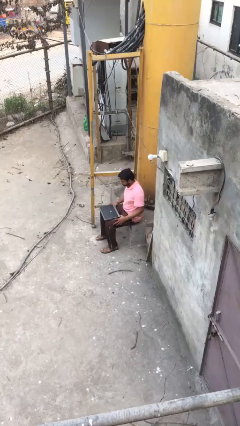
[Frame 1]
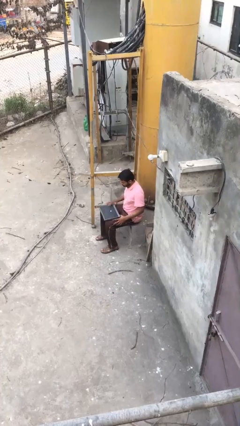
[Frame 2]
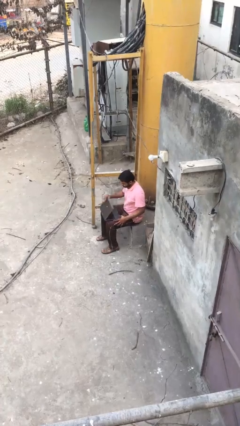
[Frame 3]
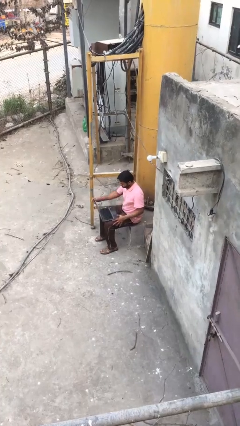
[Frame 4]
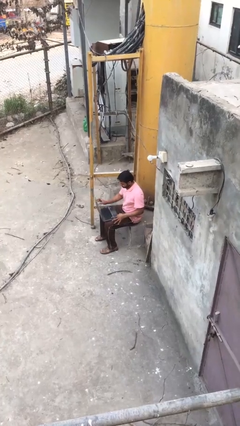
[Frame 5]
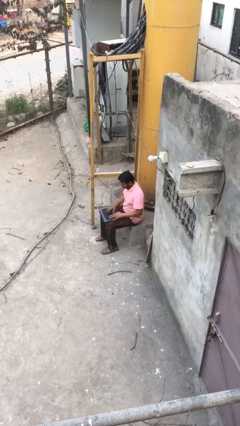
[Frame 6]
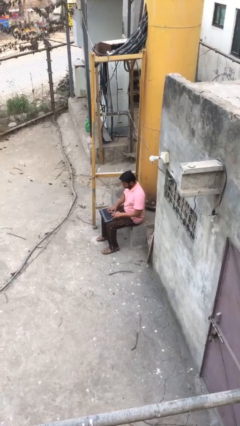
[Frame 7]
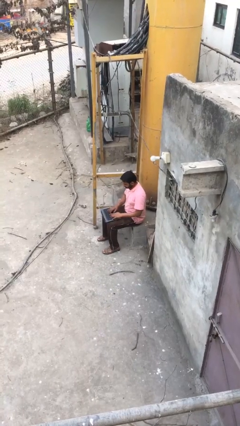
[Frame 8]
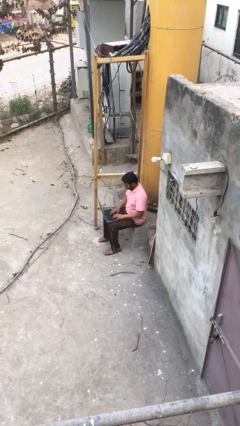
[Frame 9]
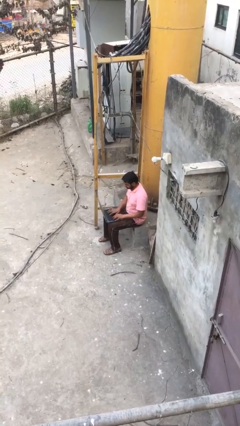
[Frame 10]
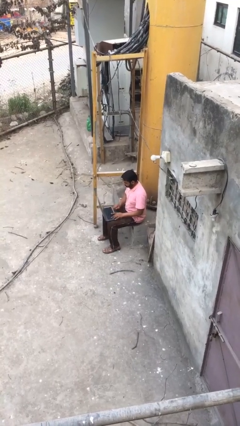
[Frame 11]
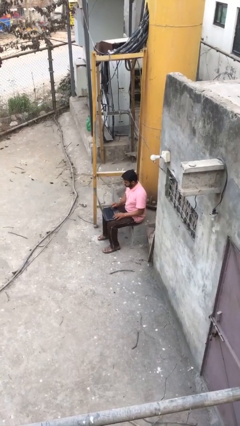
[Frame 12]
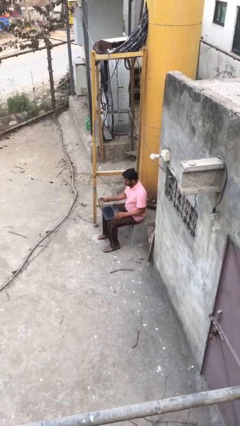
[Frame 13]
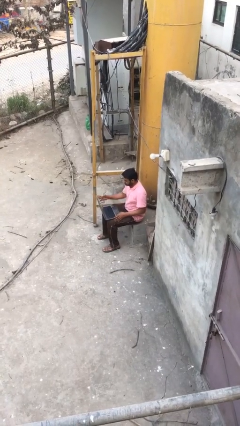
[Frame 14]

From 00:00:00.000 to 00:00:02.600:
person interacts with laptop

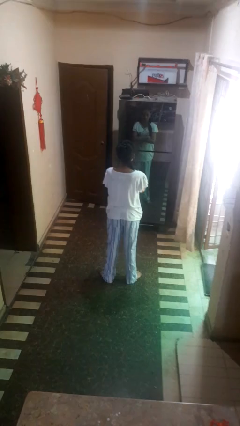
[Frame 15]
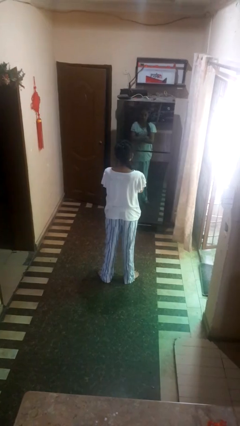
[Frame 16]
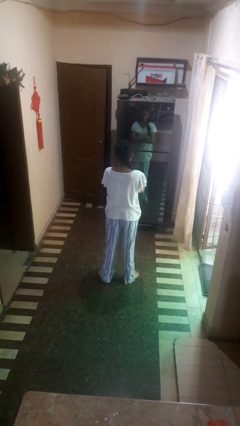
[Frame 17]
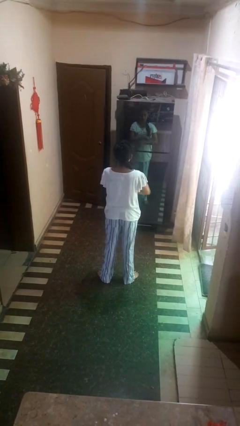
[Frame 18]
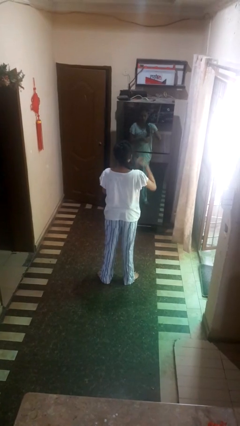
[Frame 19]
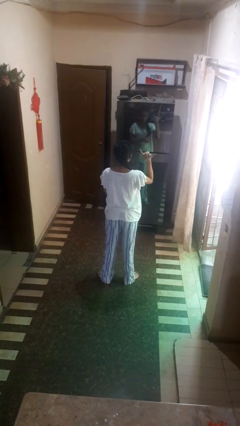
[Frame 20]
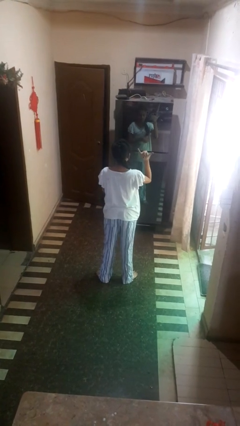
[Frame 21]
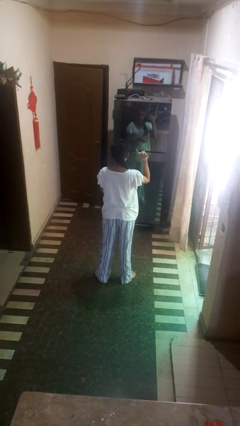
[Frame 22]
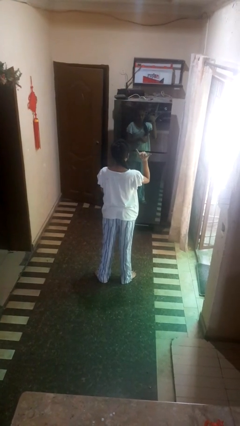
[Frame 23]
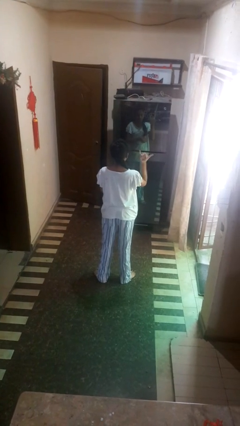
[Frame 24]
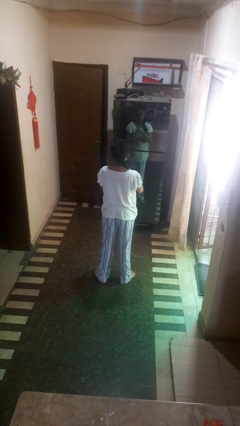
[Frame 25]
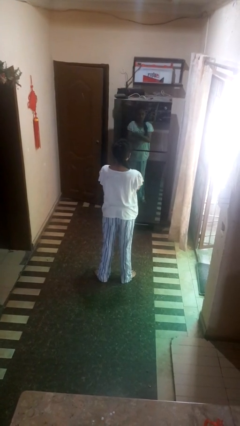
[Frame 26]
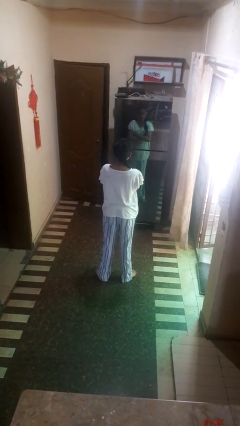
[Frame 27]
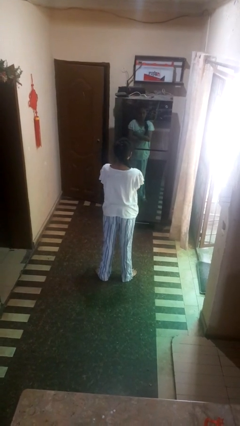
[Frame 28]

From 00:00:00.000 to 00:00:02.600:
person gestures hang loose

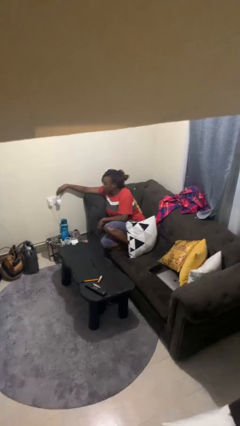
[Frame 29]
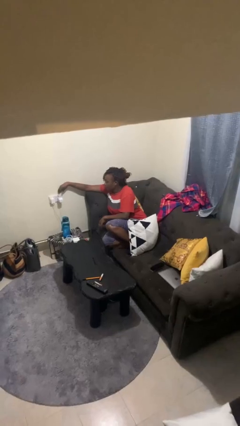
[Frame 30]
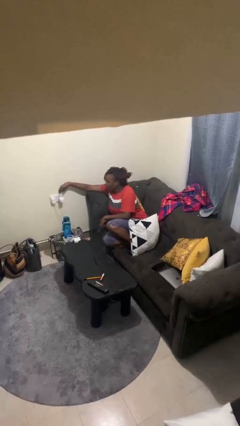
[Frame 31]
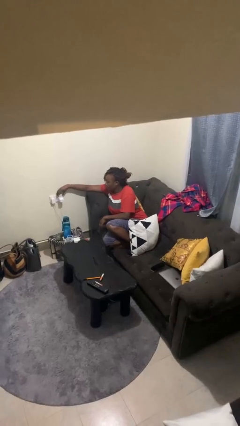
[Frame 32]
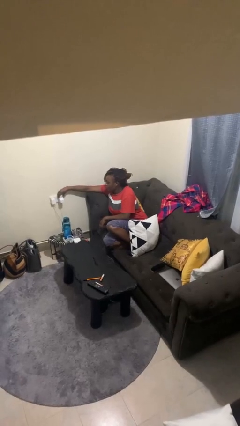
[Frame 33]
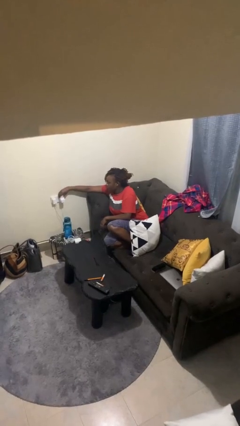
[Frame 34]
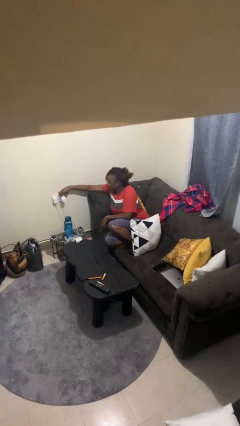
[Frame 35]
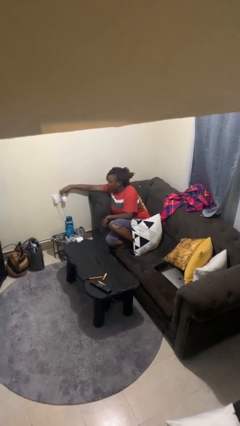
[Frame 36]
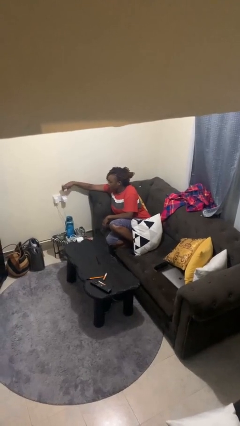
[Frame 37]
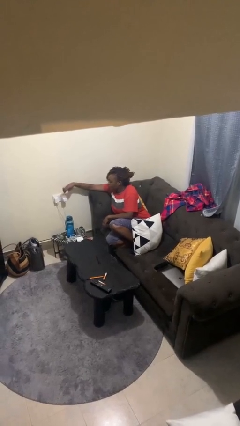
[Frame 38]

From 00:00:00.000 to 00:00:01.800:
person unplugs from electrical socket

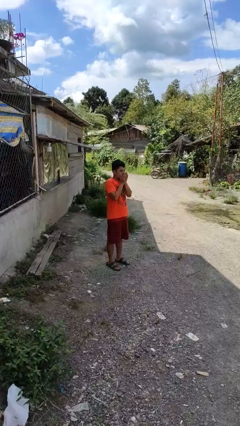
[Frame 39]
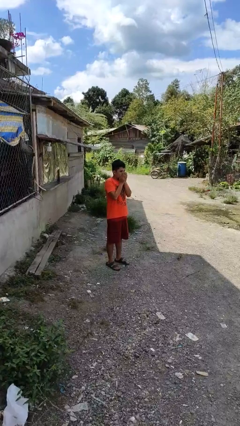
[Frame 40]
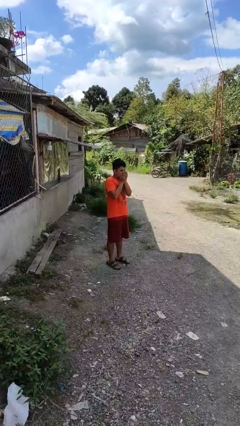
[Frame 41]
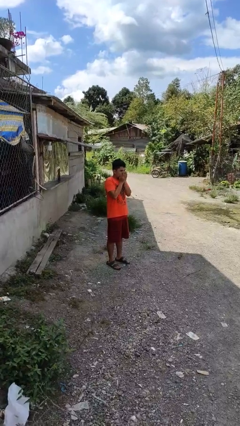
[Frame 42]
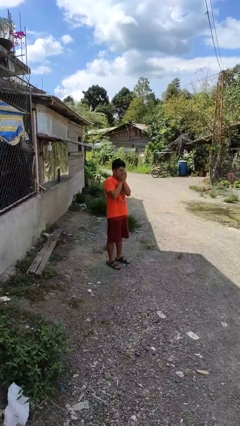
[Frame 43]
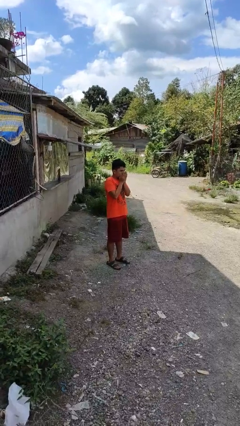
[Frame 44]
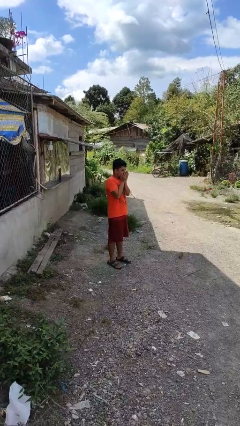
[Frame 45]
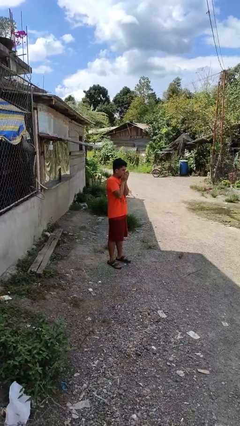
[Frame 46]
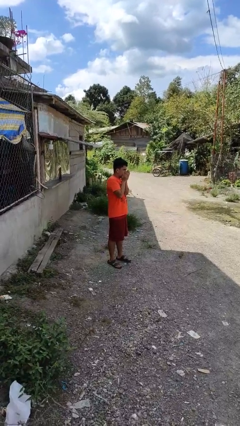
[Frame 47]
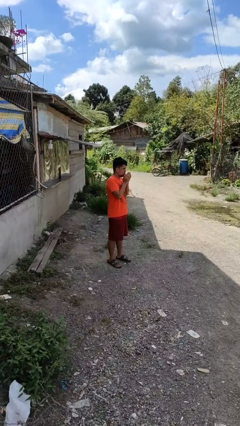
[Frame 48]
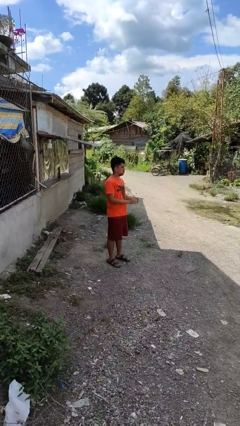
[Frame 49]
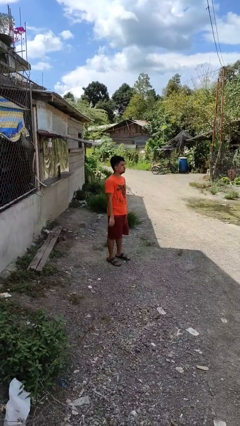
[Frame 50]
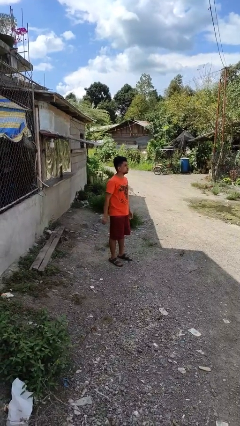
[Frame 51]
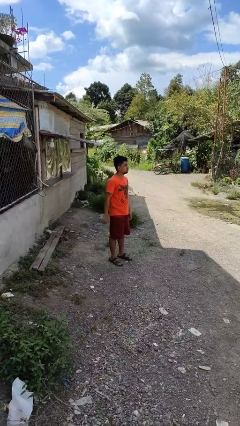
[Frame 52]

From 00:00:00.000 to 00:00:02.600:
person blows into hands

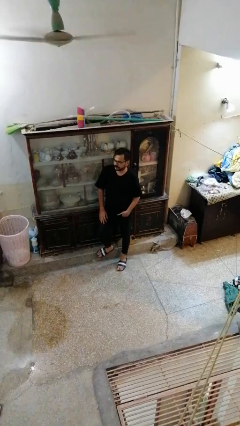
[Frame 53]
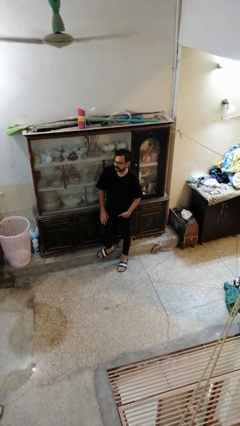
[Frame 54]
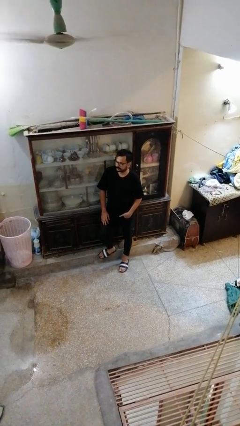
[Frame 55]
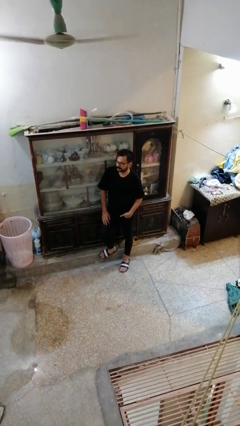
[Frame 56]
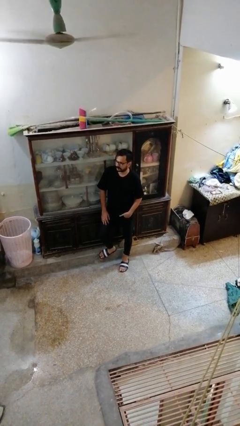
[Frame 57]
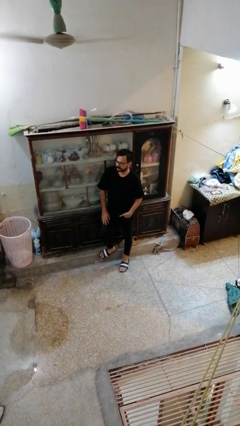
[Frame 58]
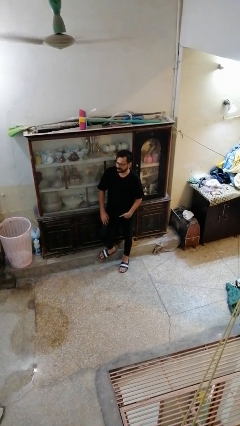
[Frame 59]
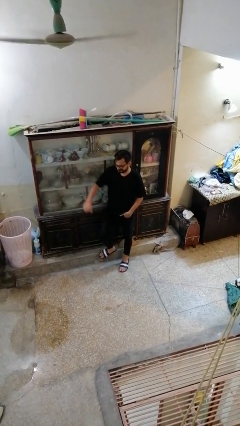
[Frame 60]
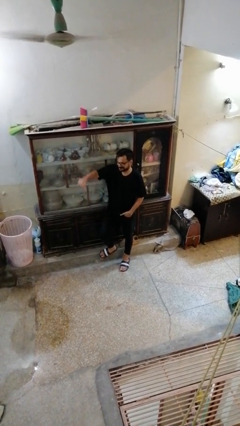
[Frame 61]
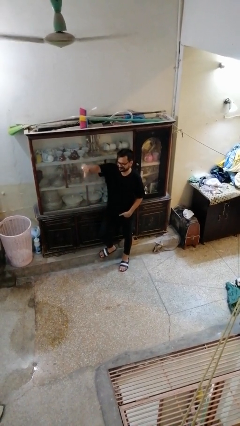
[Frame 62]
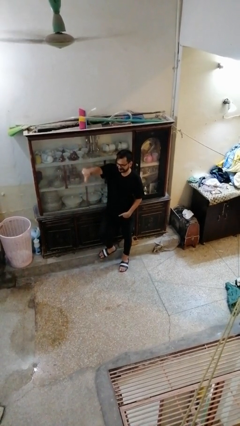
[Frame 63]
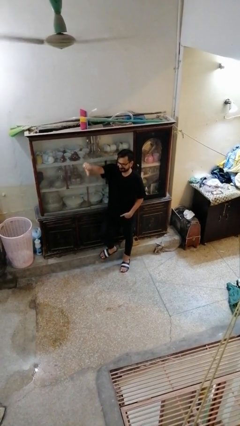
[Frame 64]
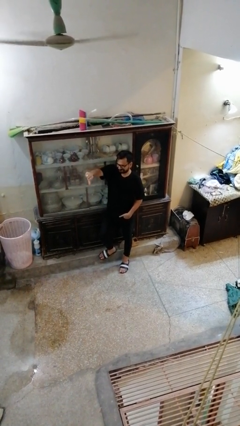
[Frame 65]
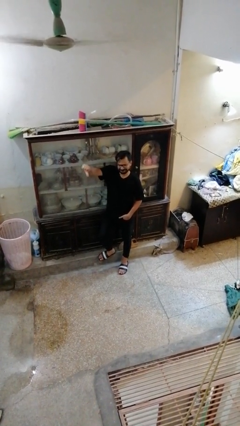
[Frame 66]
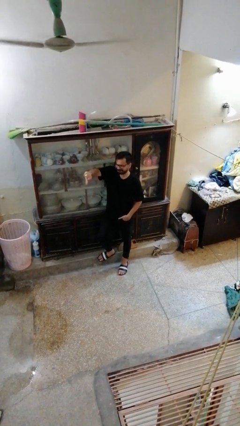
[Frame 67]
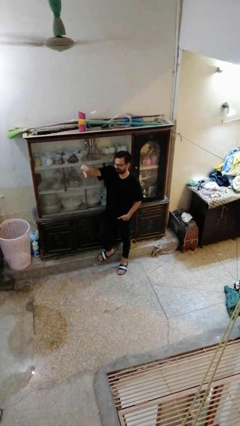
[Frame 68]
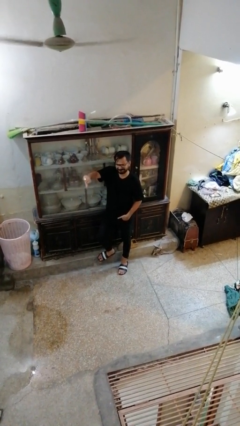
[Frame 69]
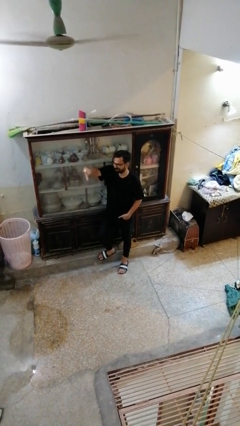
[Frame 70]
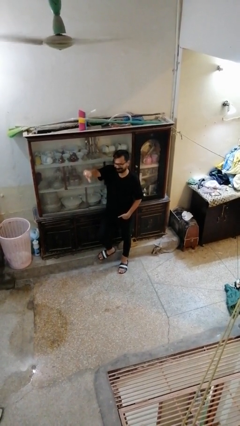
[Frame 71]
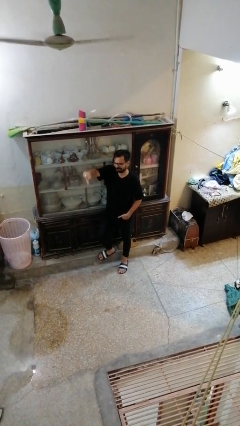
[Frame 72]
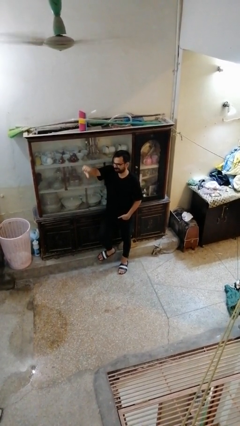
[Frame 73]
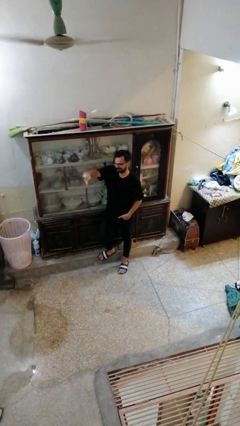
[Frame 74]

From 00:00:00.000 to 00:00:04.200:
person gestures thumbs down

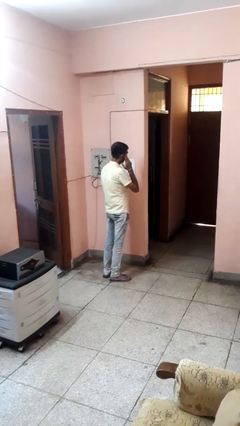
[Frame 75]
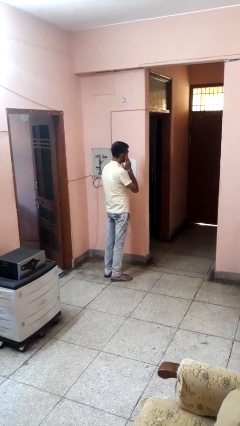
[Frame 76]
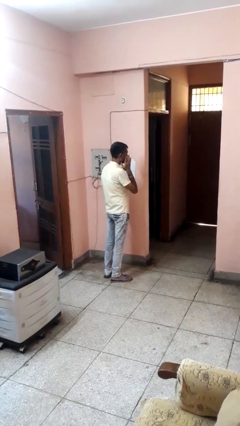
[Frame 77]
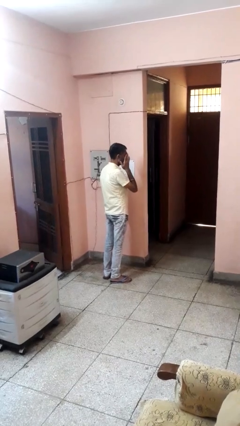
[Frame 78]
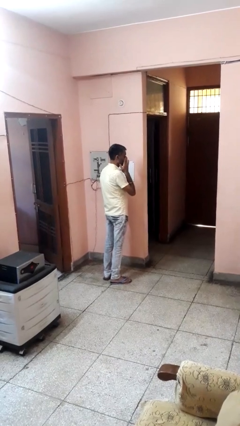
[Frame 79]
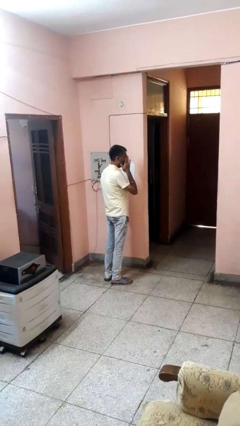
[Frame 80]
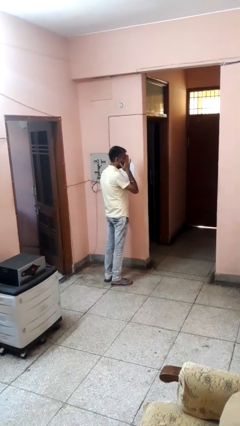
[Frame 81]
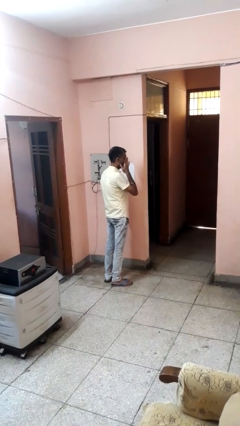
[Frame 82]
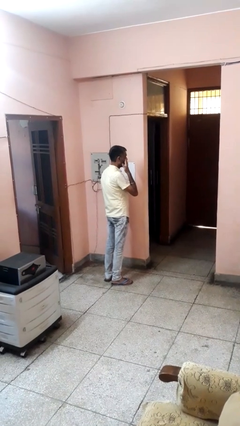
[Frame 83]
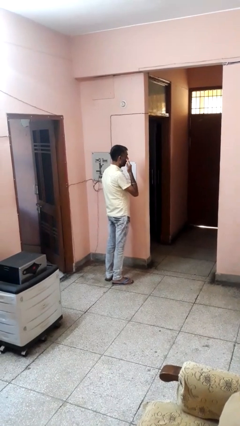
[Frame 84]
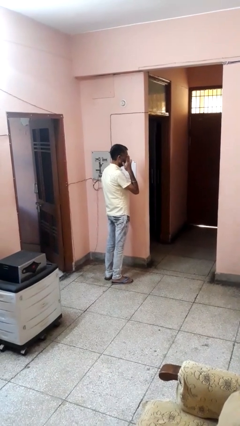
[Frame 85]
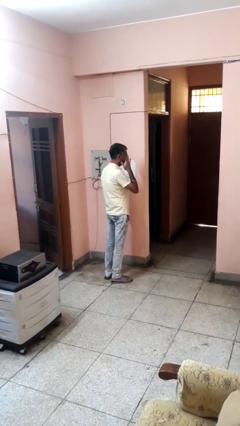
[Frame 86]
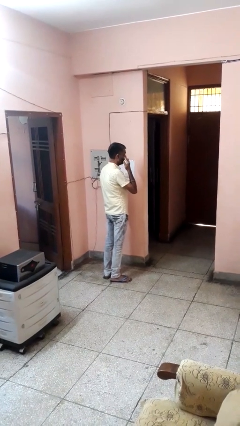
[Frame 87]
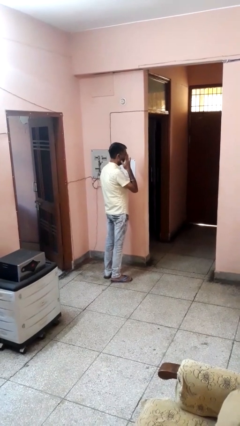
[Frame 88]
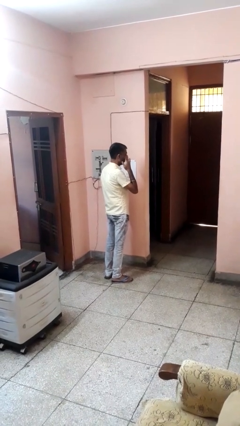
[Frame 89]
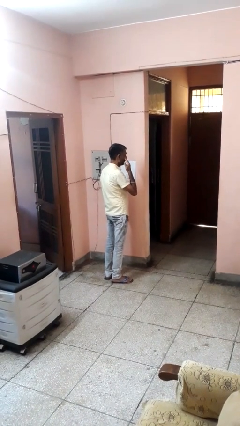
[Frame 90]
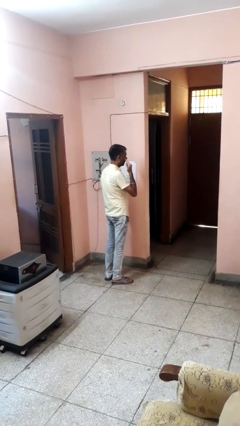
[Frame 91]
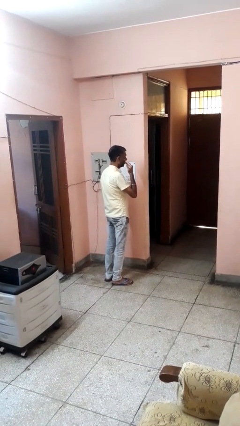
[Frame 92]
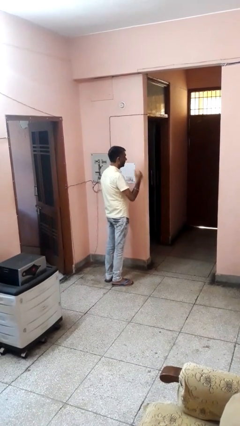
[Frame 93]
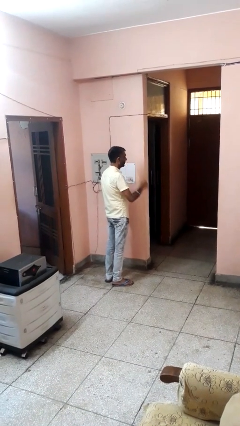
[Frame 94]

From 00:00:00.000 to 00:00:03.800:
person scratches face
